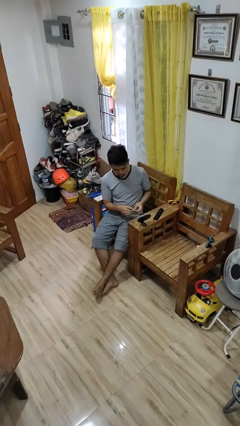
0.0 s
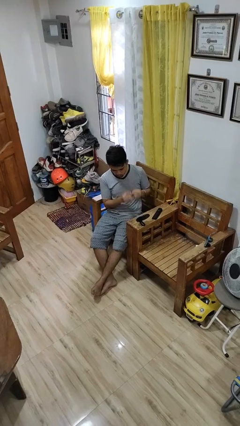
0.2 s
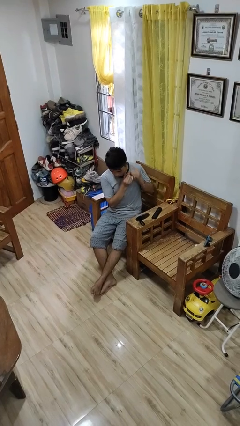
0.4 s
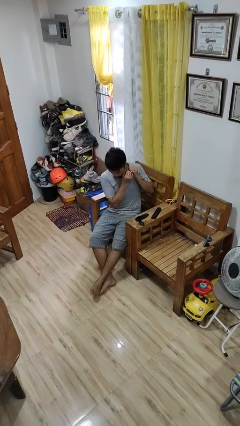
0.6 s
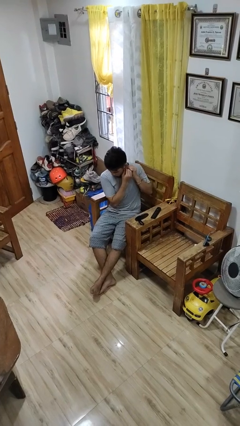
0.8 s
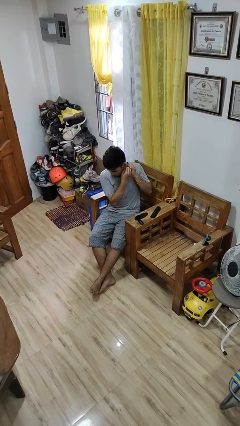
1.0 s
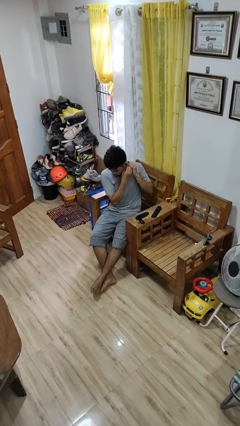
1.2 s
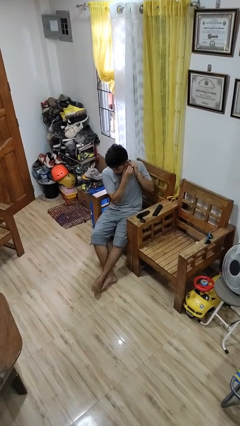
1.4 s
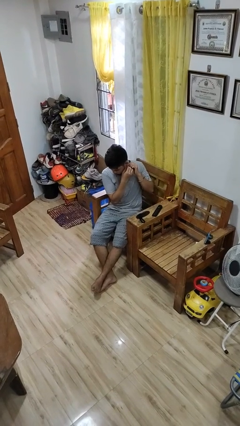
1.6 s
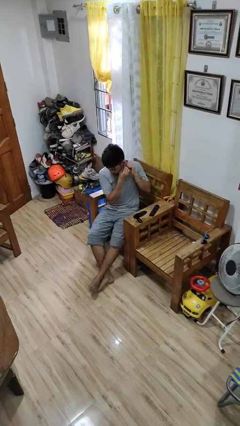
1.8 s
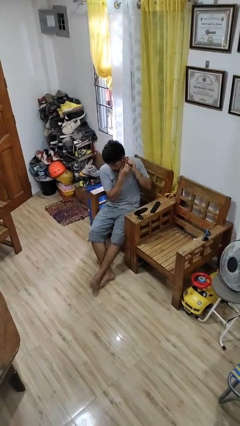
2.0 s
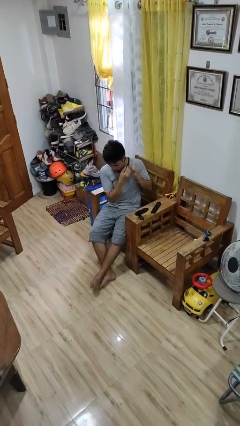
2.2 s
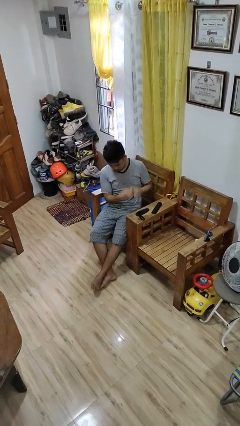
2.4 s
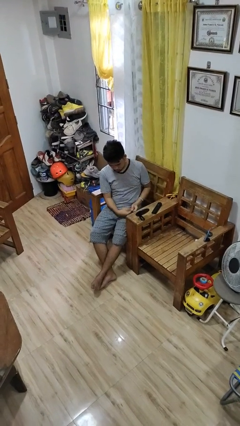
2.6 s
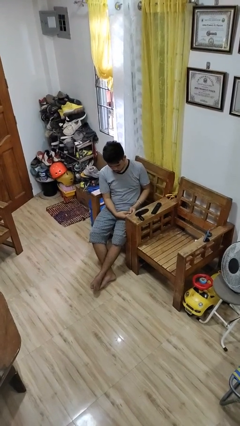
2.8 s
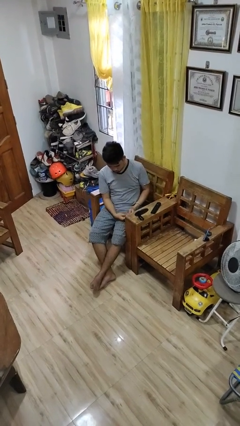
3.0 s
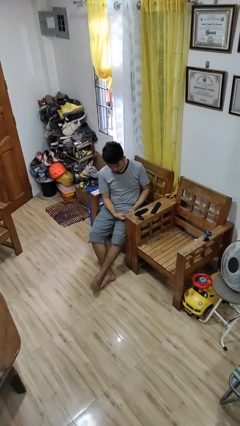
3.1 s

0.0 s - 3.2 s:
person puts on earrings

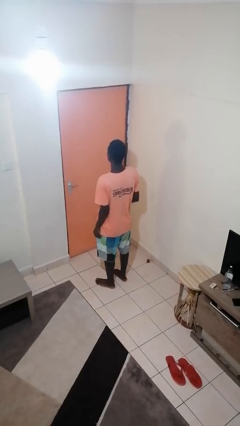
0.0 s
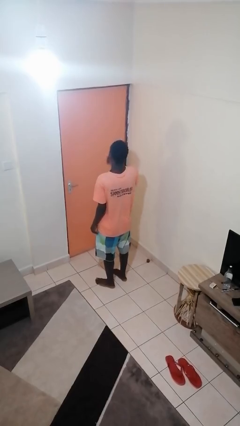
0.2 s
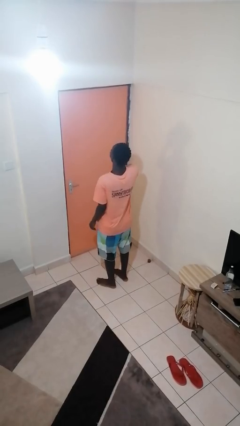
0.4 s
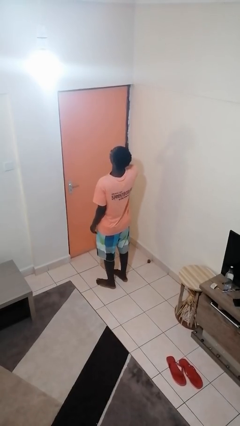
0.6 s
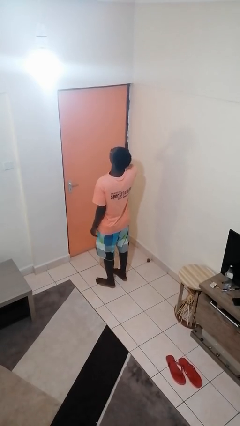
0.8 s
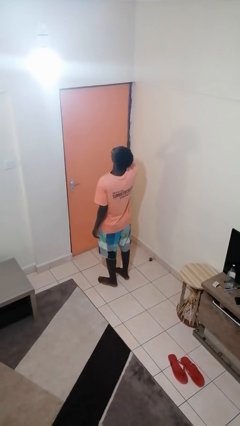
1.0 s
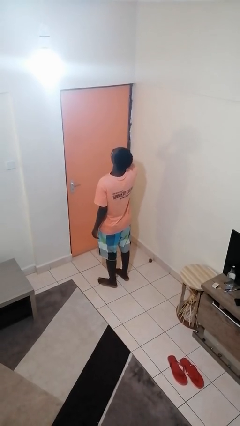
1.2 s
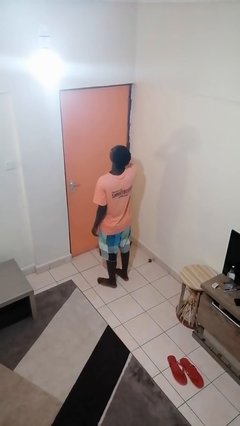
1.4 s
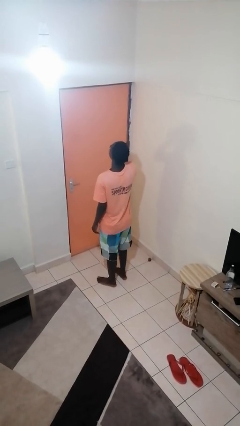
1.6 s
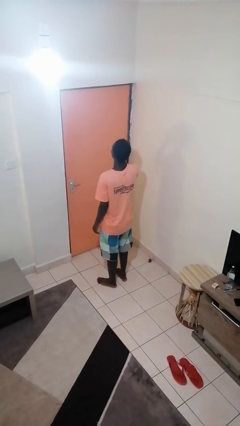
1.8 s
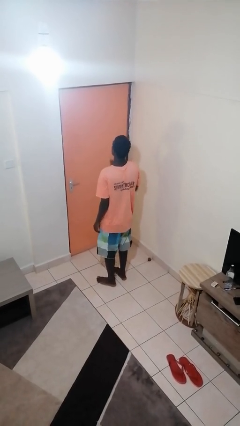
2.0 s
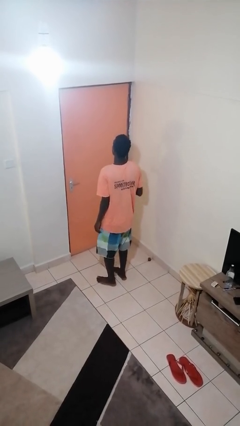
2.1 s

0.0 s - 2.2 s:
person yawns

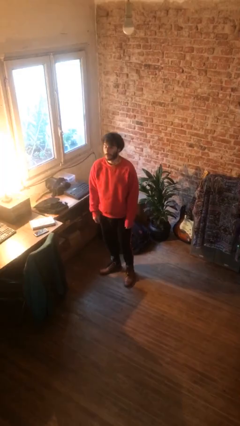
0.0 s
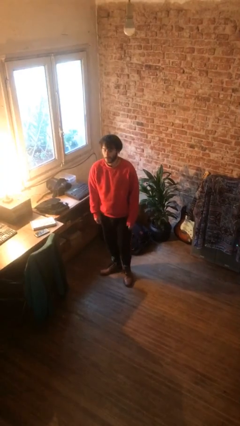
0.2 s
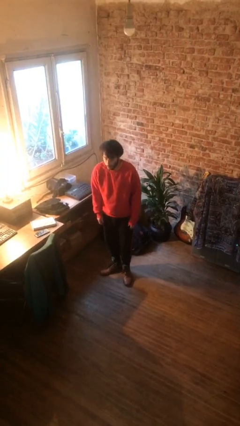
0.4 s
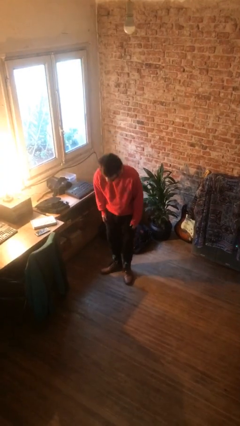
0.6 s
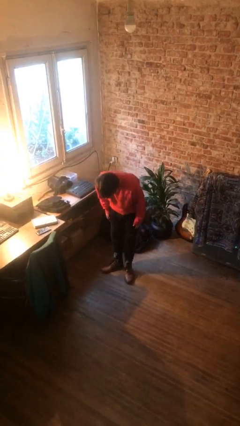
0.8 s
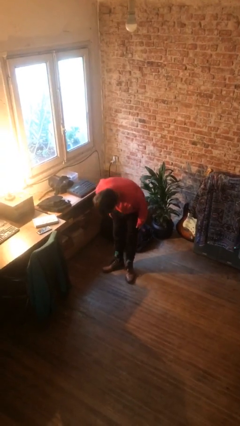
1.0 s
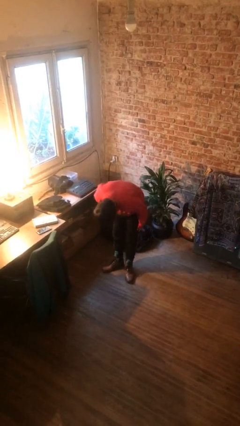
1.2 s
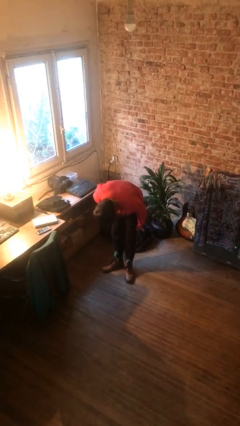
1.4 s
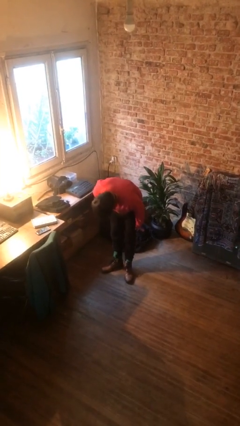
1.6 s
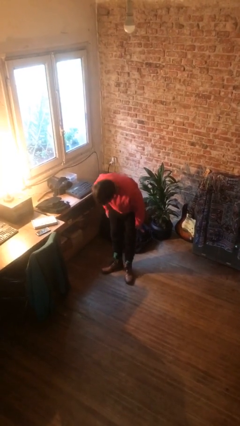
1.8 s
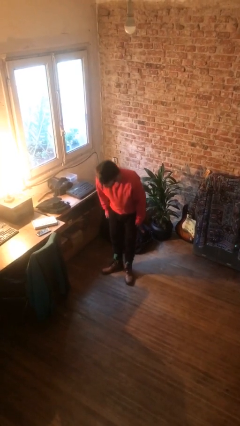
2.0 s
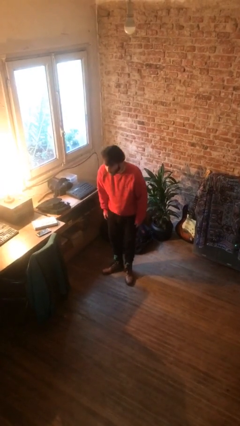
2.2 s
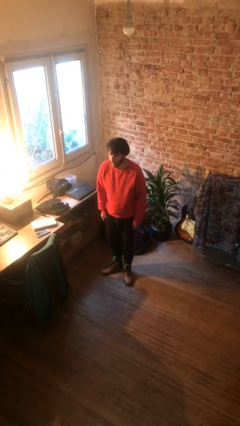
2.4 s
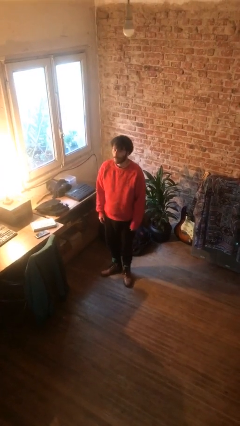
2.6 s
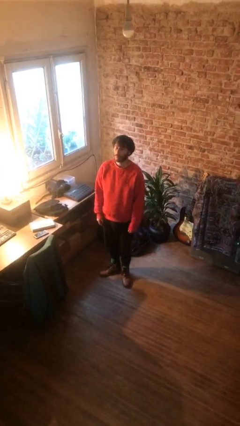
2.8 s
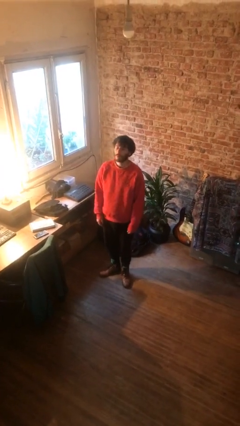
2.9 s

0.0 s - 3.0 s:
person bows

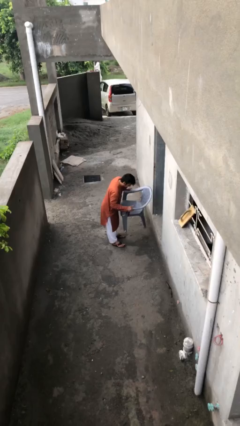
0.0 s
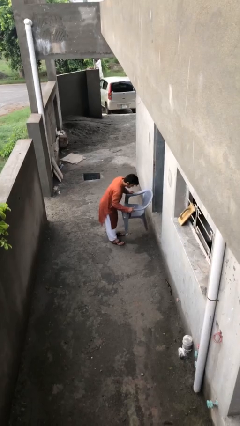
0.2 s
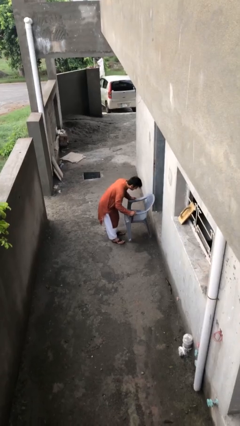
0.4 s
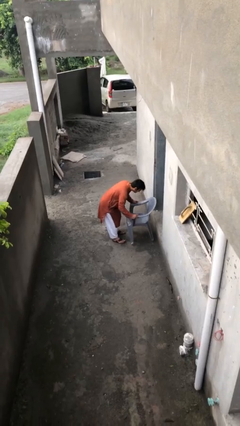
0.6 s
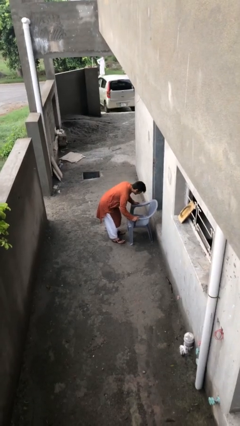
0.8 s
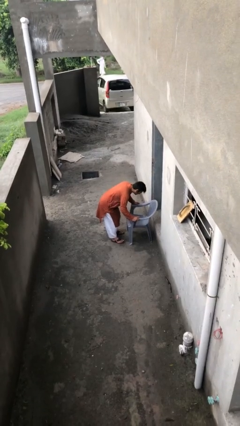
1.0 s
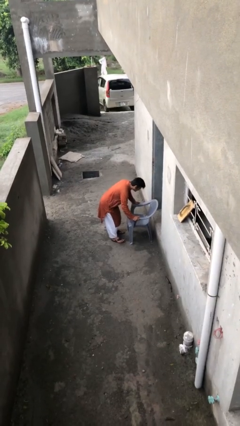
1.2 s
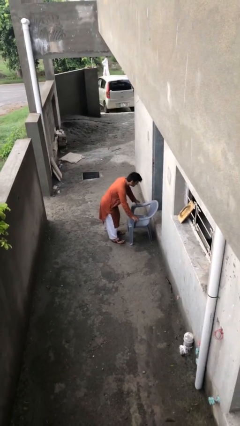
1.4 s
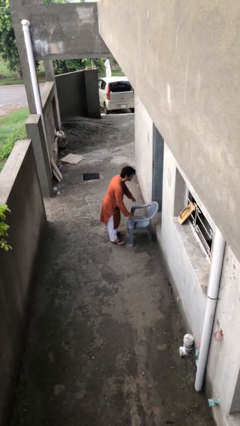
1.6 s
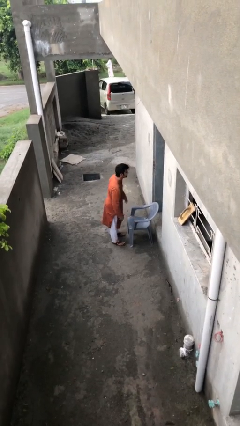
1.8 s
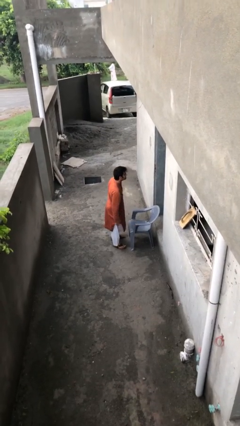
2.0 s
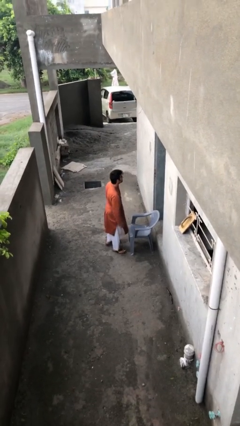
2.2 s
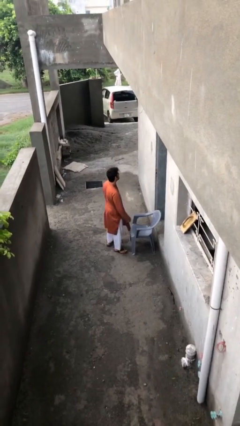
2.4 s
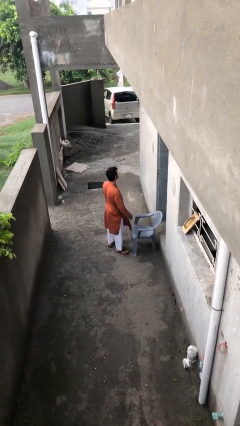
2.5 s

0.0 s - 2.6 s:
person puts down object on floor

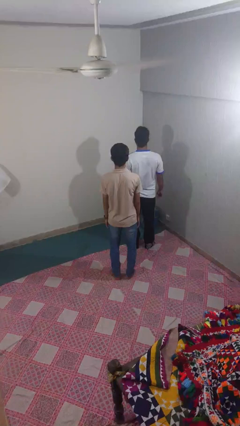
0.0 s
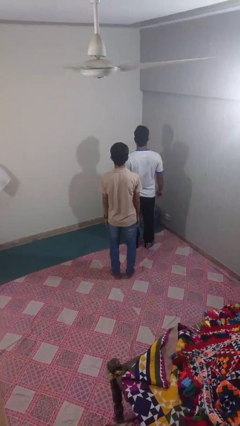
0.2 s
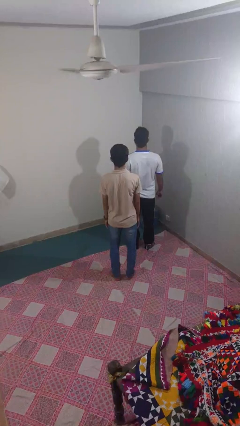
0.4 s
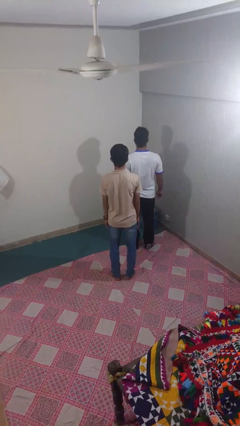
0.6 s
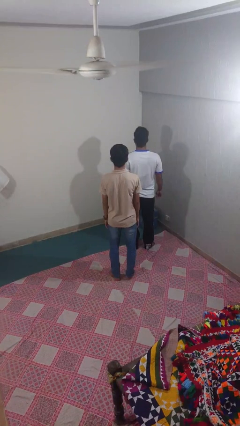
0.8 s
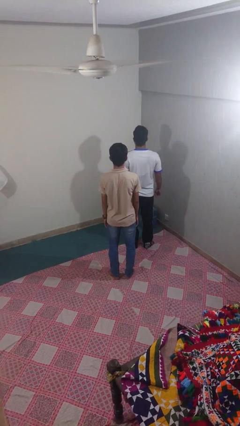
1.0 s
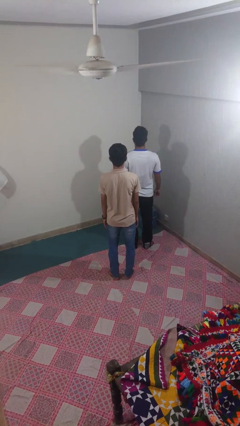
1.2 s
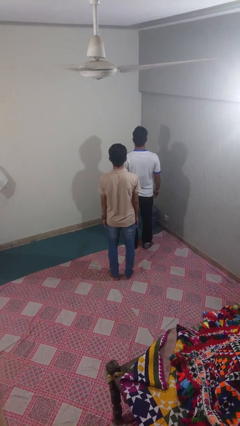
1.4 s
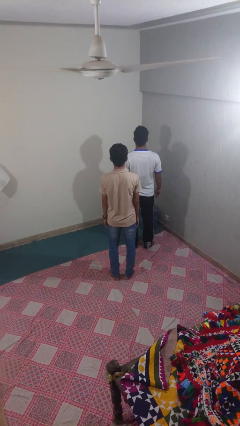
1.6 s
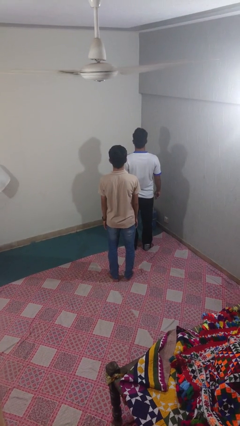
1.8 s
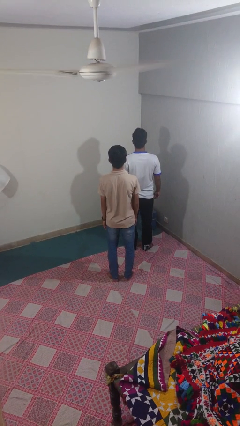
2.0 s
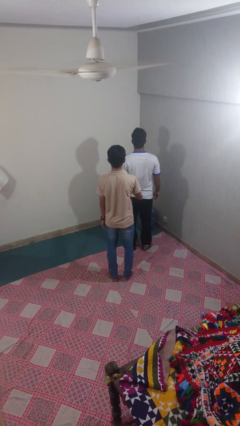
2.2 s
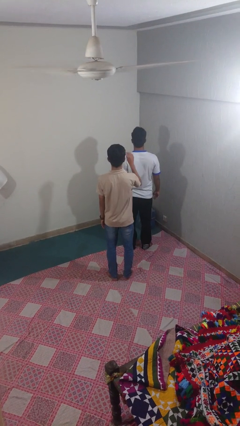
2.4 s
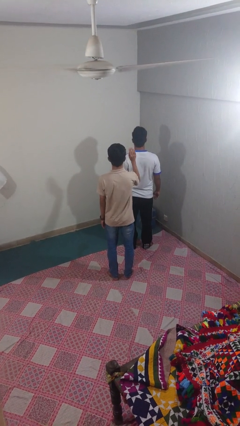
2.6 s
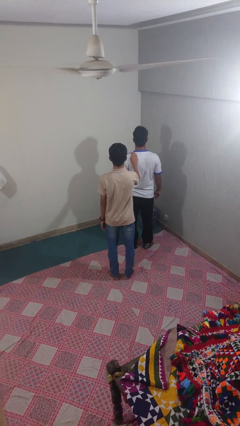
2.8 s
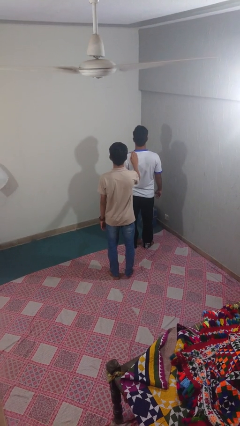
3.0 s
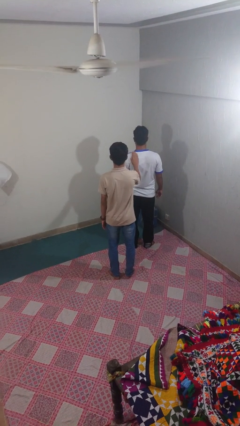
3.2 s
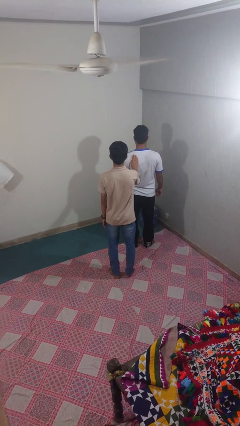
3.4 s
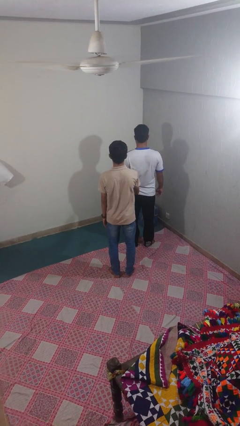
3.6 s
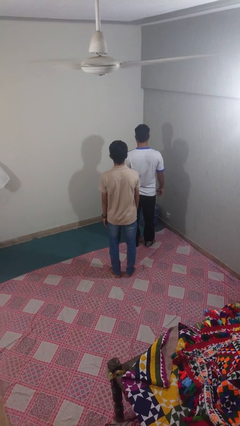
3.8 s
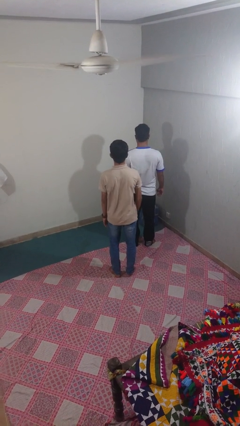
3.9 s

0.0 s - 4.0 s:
person touches back of person

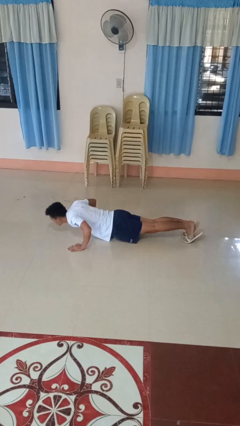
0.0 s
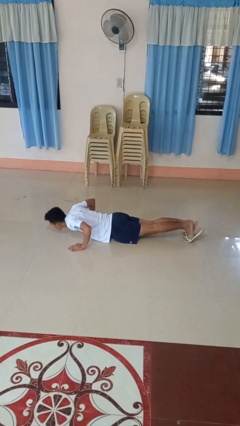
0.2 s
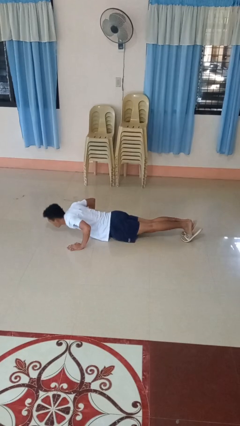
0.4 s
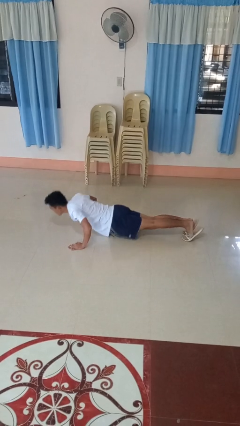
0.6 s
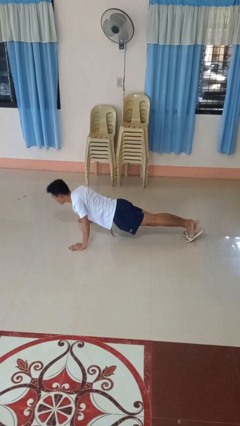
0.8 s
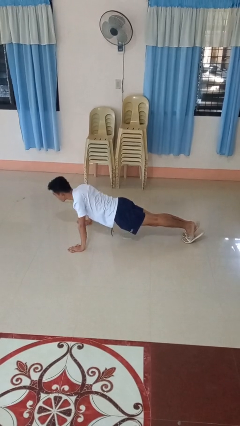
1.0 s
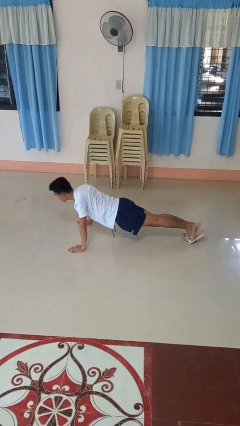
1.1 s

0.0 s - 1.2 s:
person exercises with pushup

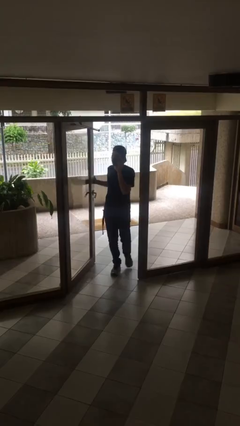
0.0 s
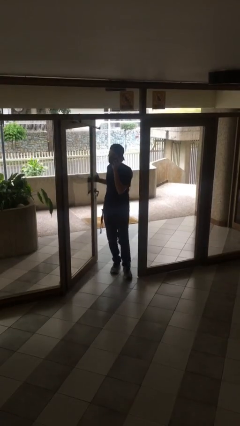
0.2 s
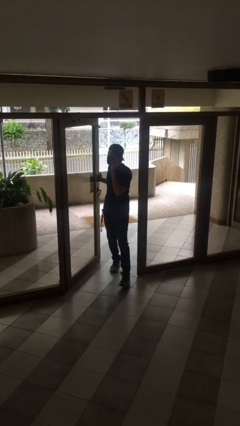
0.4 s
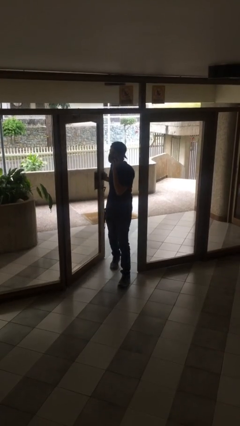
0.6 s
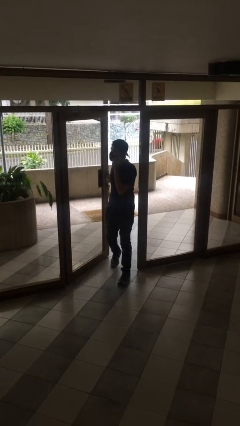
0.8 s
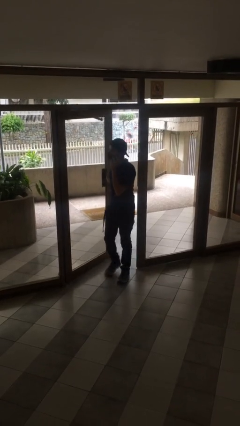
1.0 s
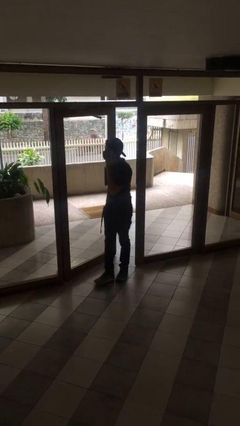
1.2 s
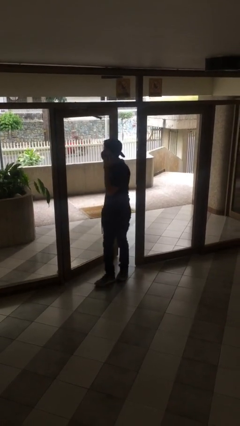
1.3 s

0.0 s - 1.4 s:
person enters scene through structure
